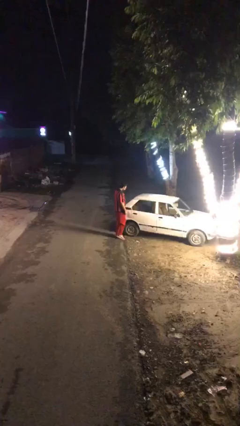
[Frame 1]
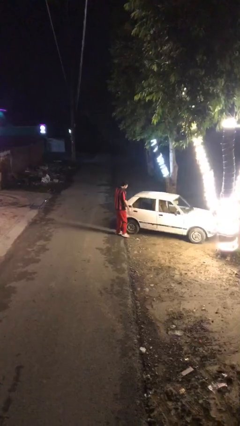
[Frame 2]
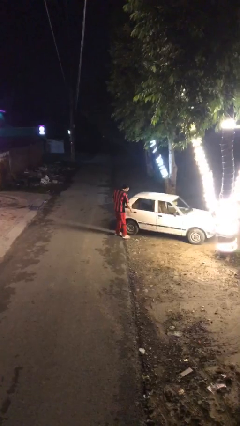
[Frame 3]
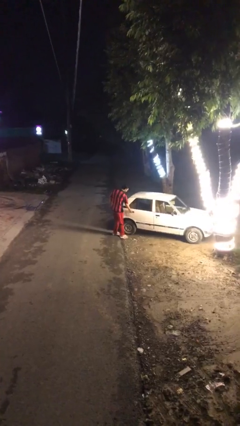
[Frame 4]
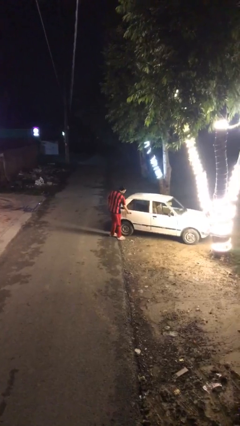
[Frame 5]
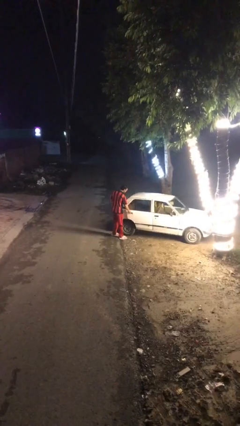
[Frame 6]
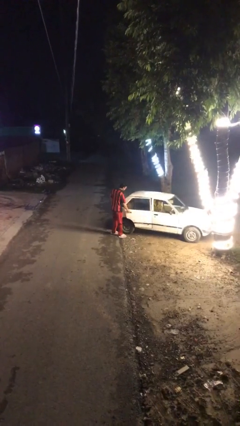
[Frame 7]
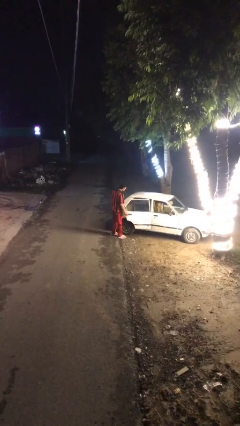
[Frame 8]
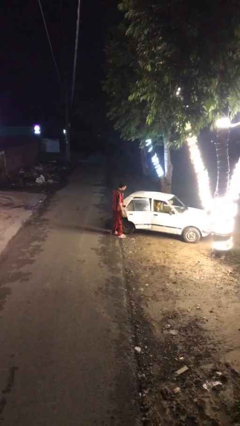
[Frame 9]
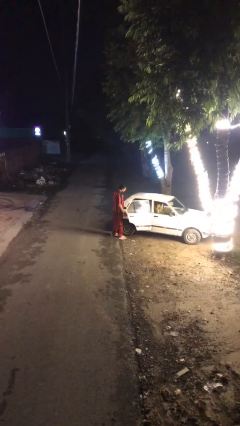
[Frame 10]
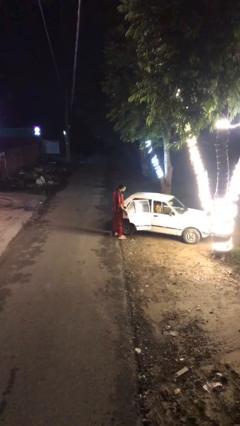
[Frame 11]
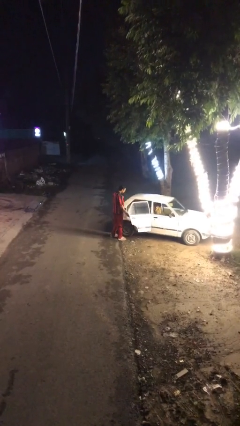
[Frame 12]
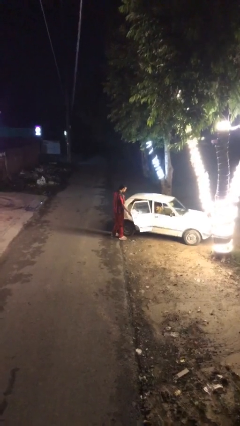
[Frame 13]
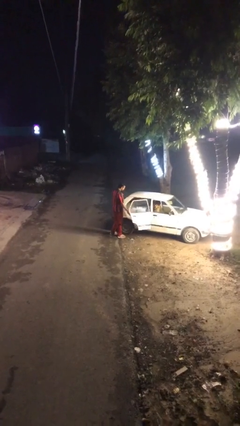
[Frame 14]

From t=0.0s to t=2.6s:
person opens car door

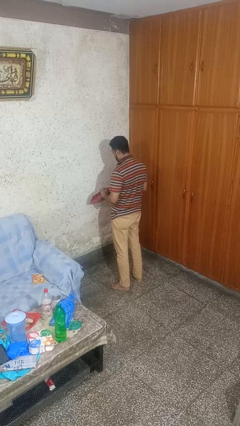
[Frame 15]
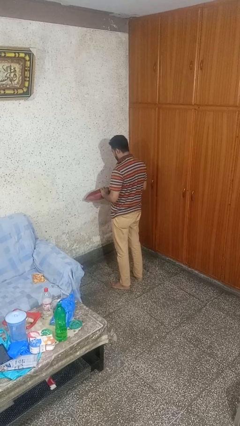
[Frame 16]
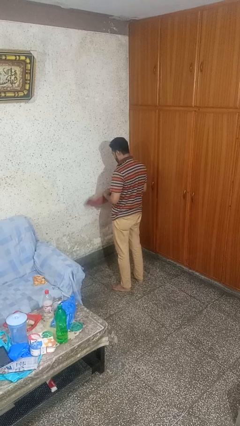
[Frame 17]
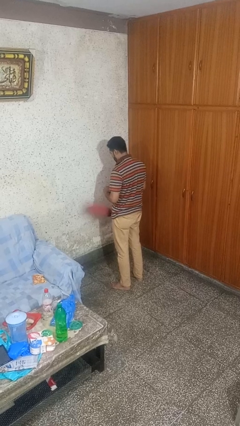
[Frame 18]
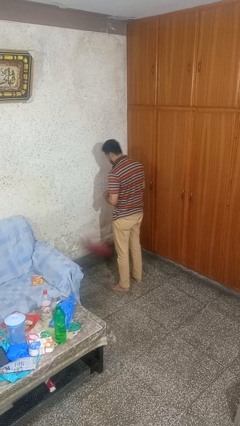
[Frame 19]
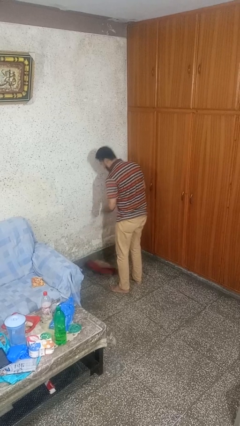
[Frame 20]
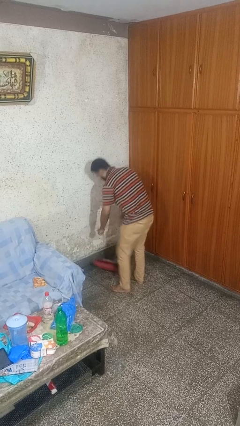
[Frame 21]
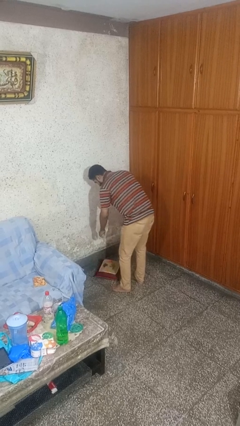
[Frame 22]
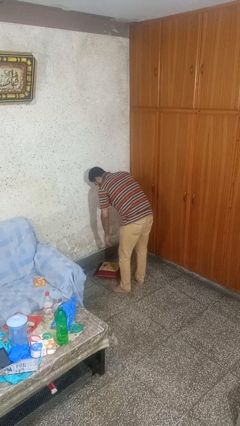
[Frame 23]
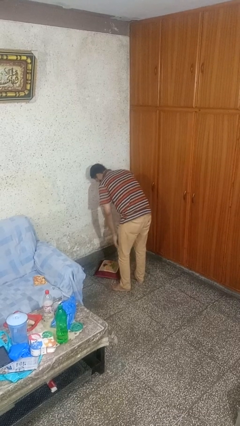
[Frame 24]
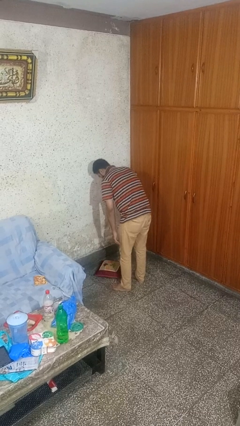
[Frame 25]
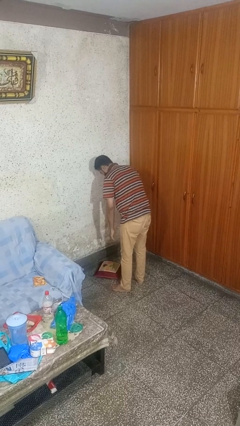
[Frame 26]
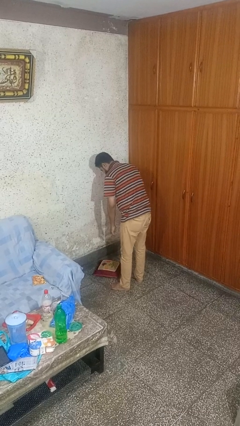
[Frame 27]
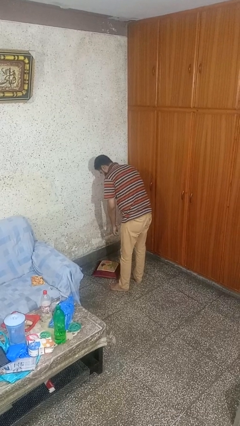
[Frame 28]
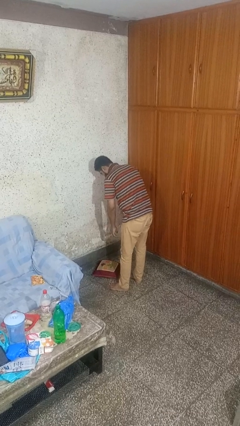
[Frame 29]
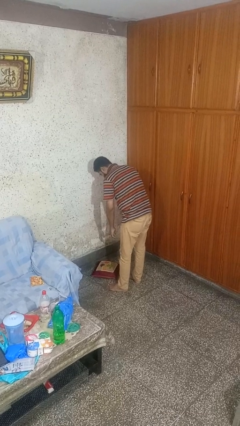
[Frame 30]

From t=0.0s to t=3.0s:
person drops object

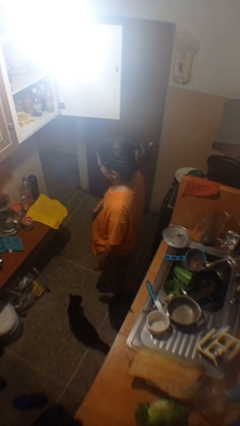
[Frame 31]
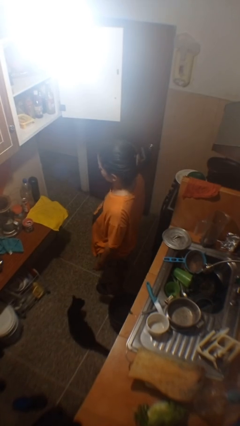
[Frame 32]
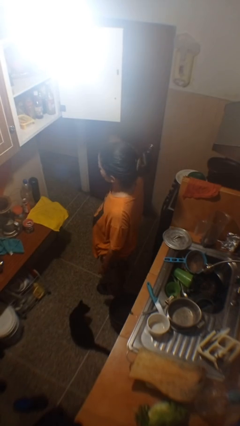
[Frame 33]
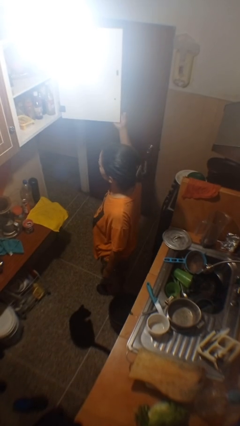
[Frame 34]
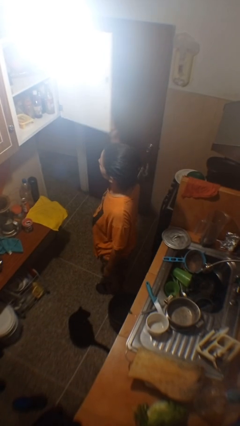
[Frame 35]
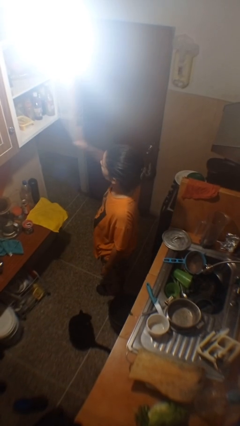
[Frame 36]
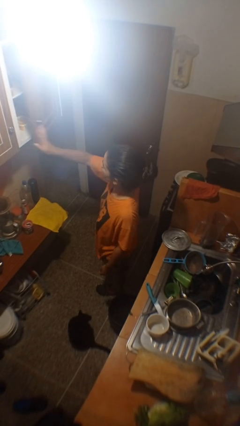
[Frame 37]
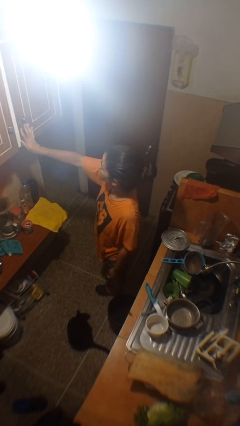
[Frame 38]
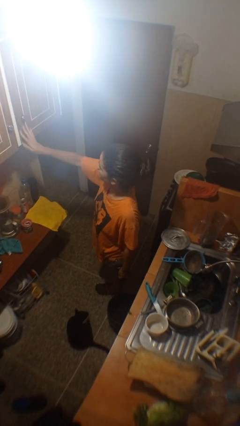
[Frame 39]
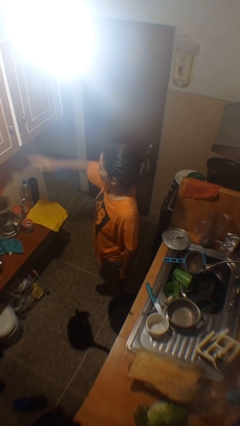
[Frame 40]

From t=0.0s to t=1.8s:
person closes cabinet

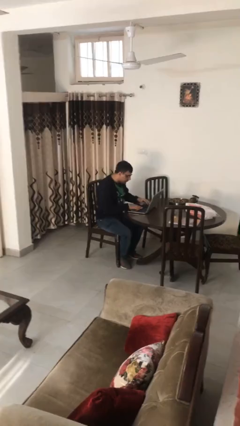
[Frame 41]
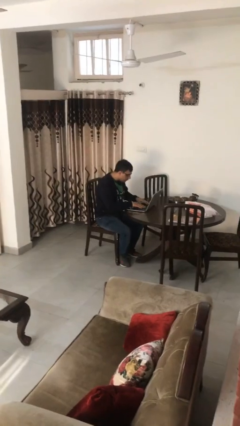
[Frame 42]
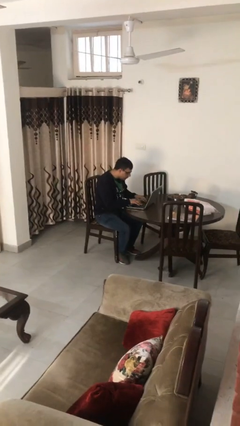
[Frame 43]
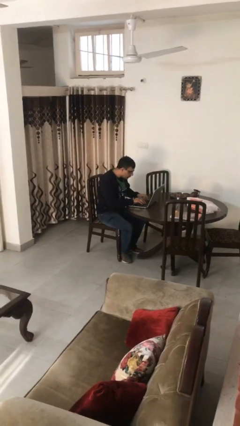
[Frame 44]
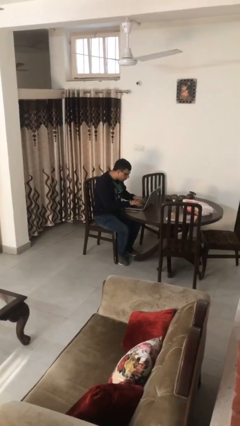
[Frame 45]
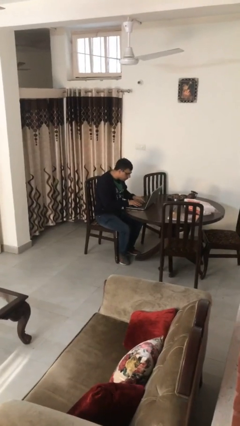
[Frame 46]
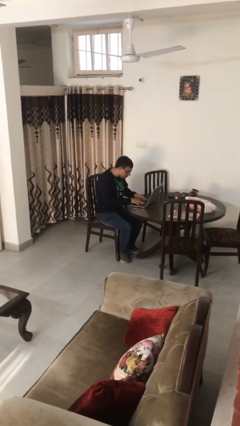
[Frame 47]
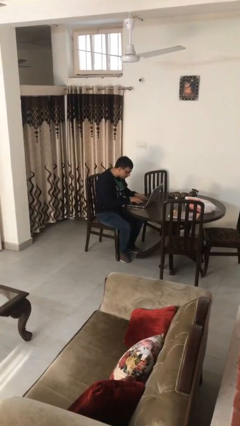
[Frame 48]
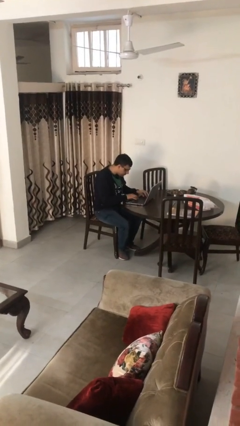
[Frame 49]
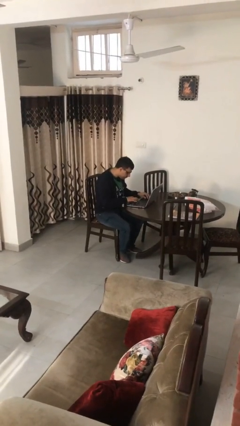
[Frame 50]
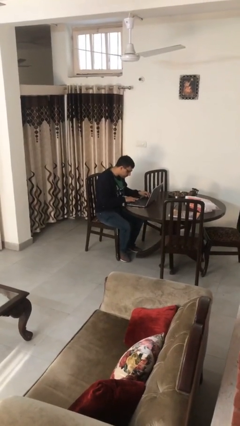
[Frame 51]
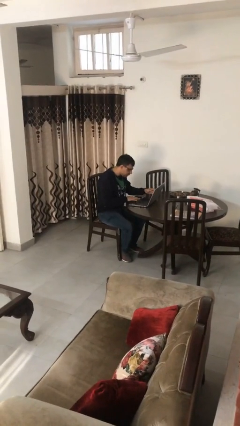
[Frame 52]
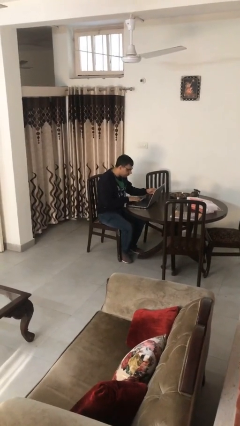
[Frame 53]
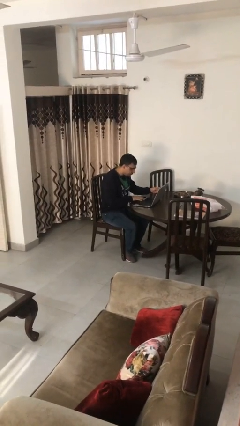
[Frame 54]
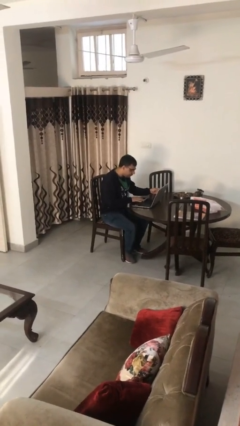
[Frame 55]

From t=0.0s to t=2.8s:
person interacts with laptop

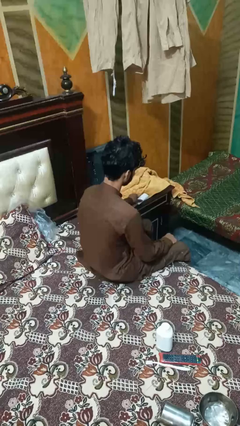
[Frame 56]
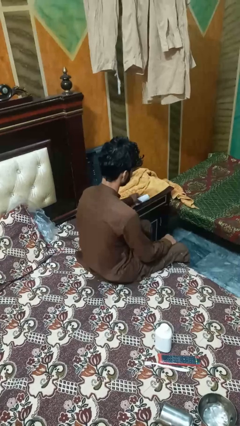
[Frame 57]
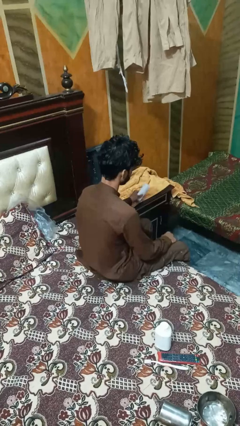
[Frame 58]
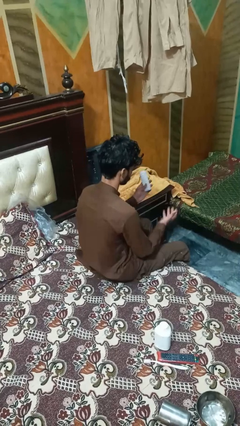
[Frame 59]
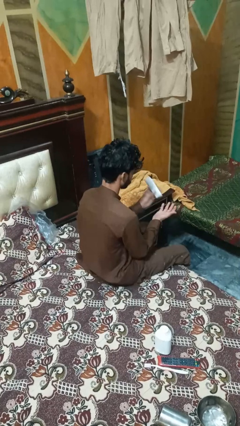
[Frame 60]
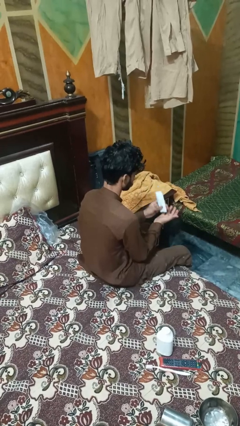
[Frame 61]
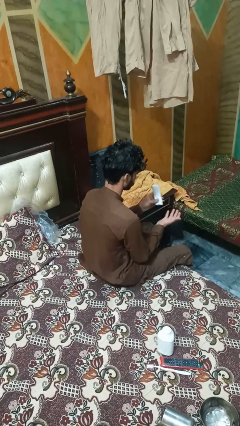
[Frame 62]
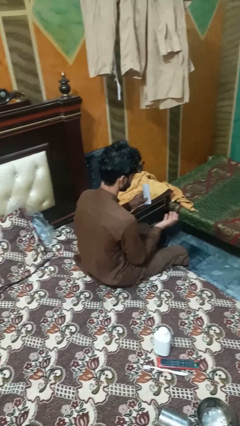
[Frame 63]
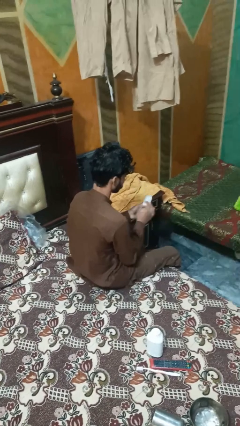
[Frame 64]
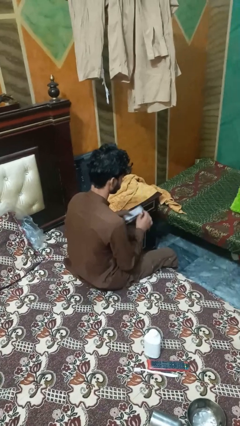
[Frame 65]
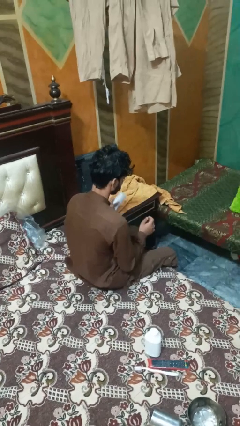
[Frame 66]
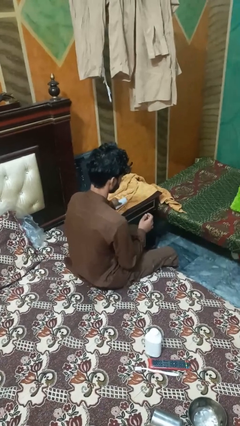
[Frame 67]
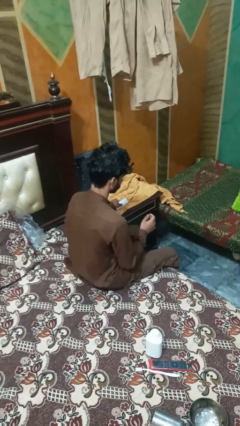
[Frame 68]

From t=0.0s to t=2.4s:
person applies facial moisturizer

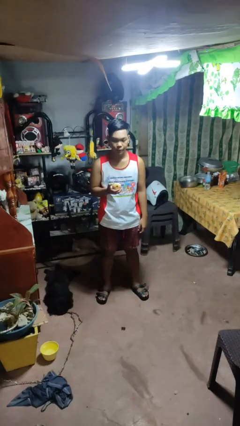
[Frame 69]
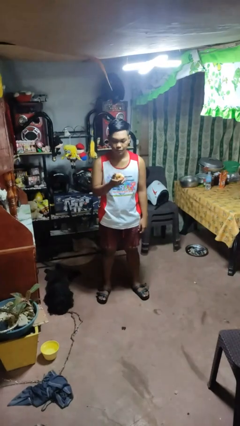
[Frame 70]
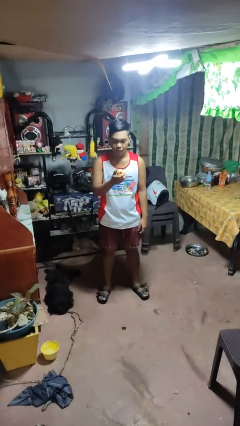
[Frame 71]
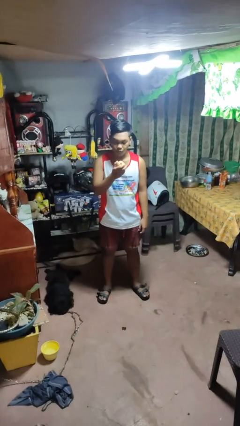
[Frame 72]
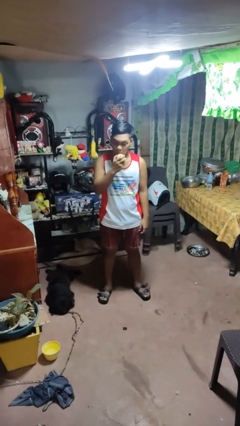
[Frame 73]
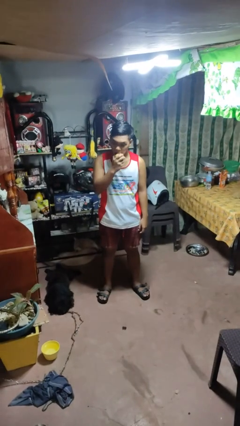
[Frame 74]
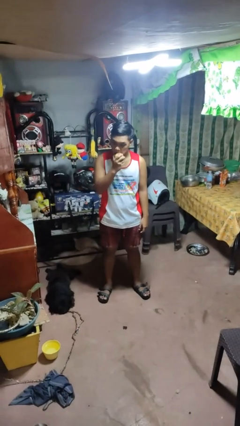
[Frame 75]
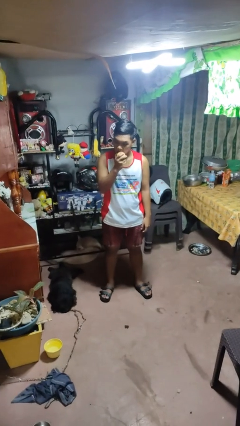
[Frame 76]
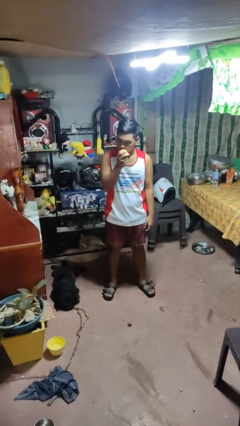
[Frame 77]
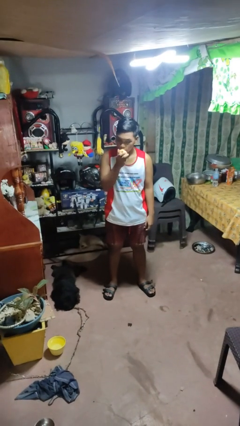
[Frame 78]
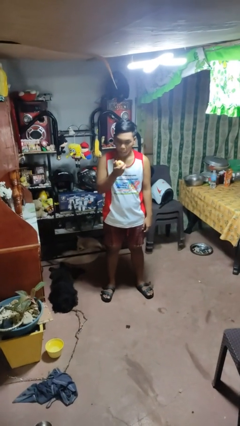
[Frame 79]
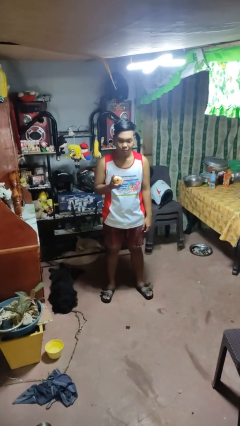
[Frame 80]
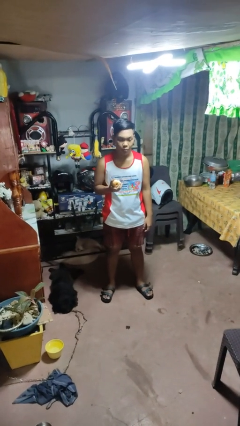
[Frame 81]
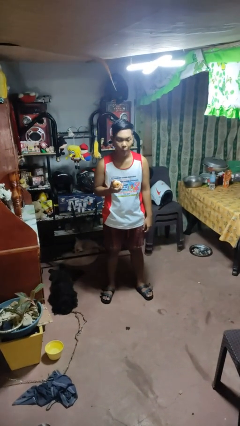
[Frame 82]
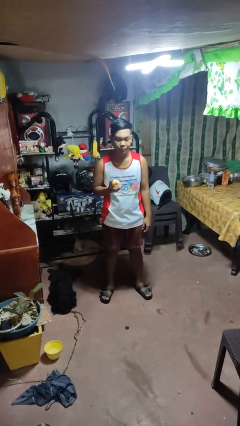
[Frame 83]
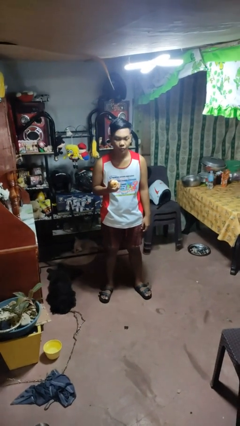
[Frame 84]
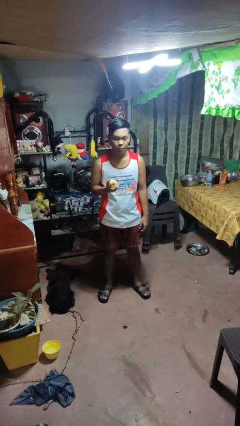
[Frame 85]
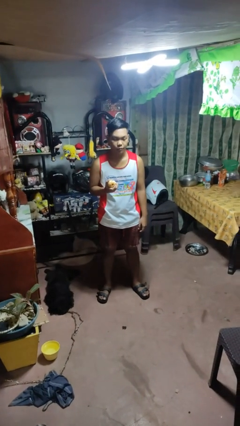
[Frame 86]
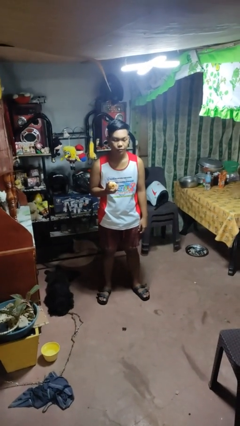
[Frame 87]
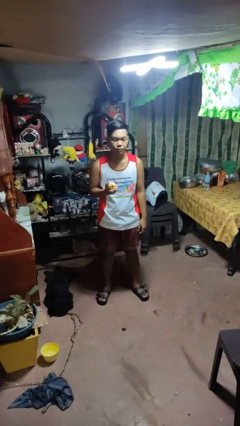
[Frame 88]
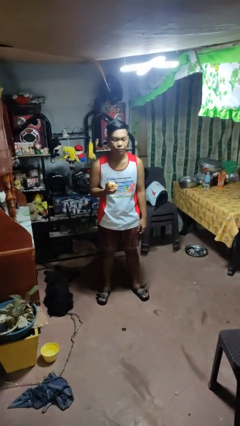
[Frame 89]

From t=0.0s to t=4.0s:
person eats apple

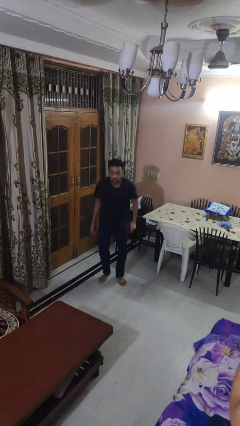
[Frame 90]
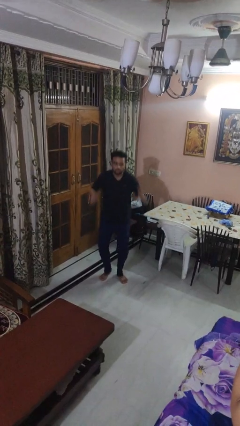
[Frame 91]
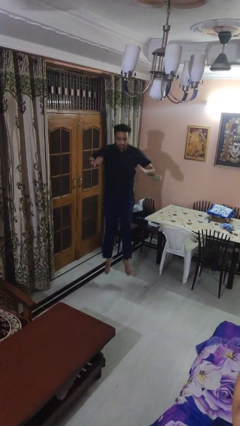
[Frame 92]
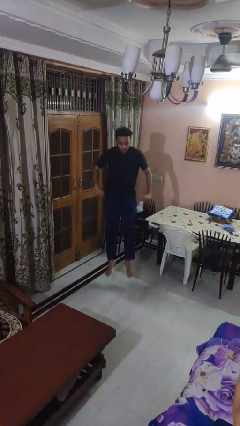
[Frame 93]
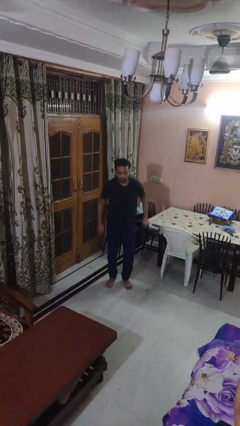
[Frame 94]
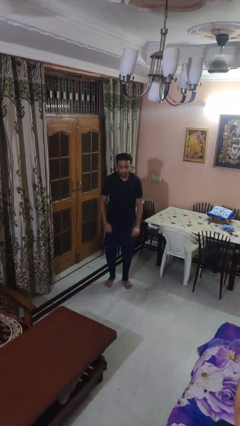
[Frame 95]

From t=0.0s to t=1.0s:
person jumps
